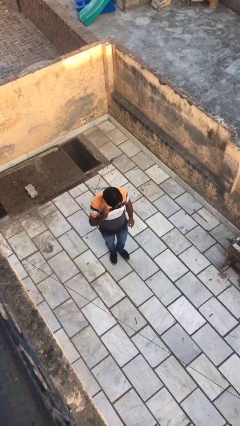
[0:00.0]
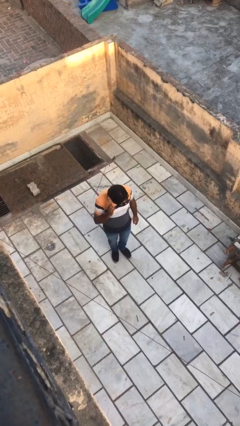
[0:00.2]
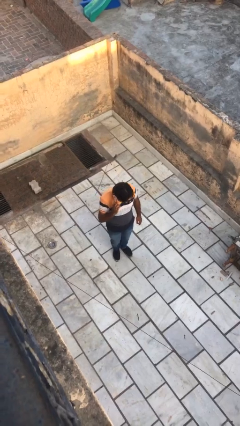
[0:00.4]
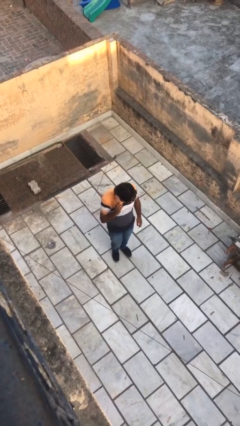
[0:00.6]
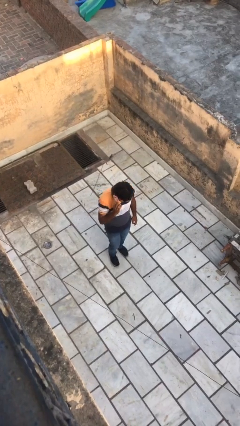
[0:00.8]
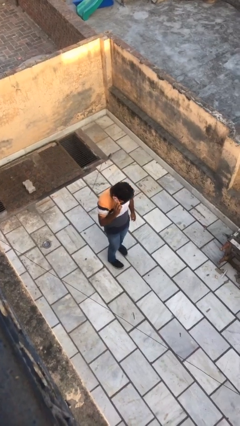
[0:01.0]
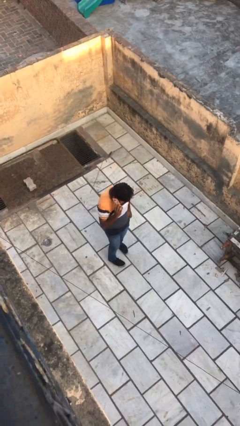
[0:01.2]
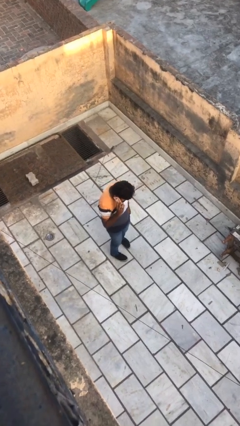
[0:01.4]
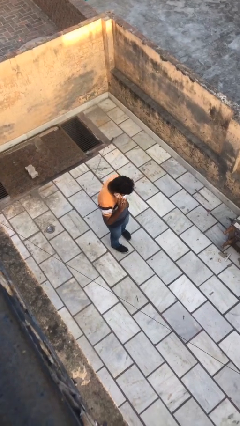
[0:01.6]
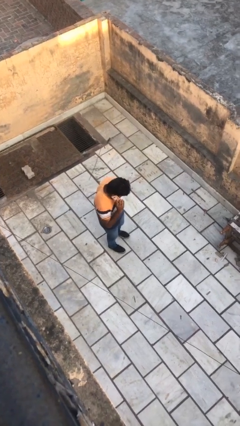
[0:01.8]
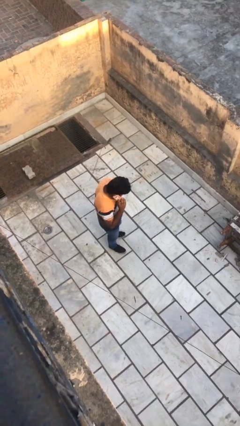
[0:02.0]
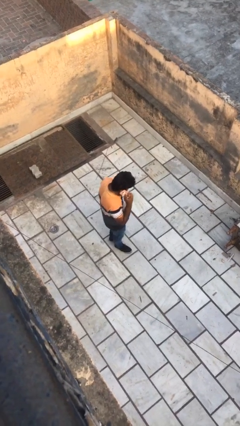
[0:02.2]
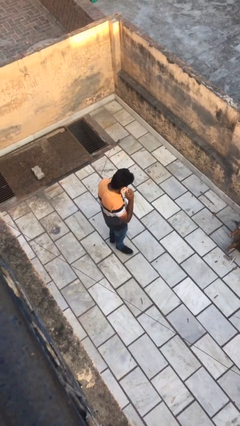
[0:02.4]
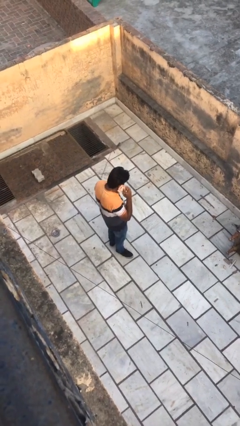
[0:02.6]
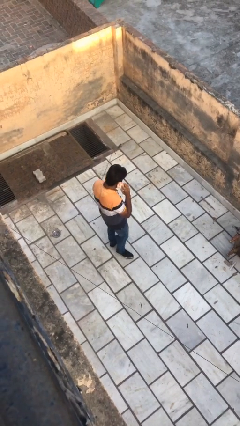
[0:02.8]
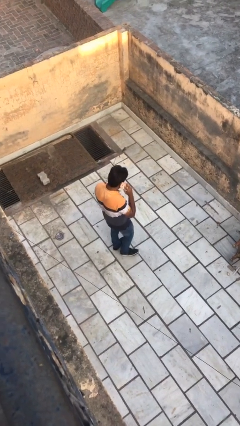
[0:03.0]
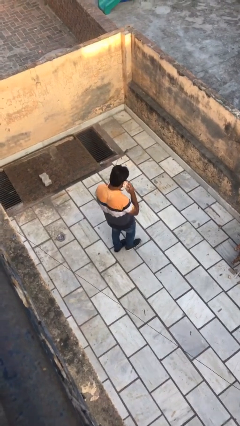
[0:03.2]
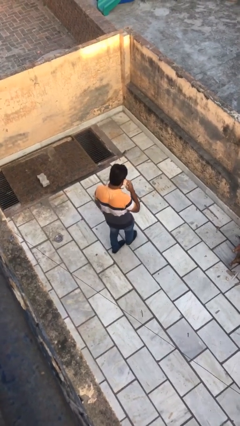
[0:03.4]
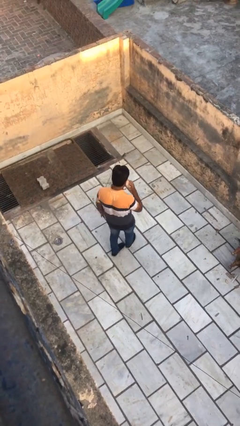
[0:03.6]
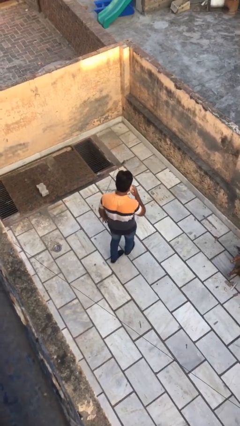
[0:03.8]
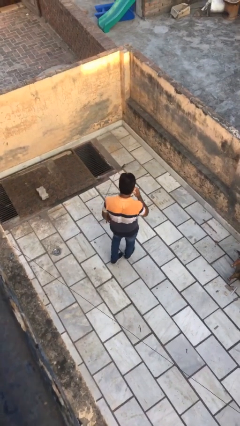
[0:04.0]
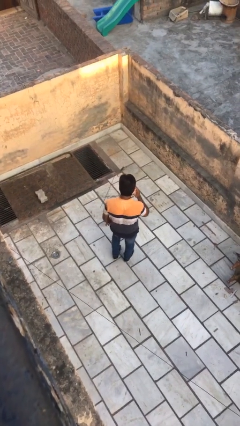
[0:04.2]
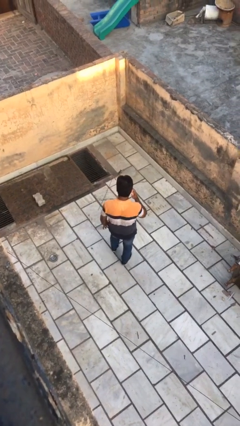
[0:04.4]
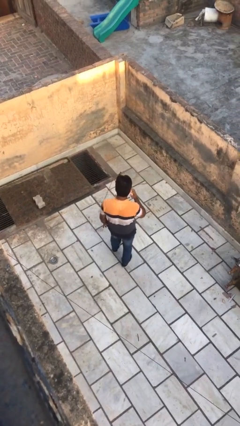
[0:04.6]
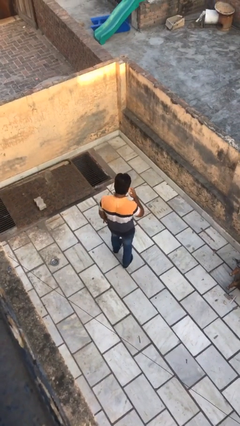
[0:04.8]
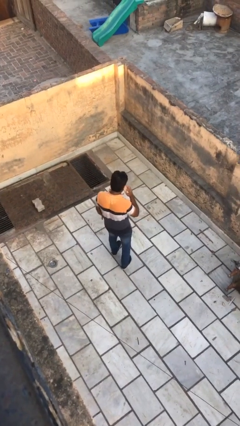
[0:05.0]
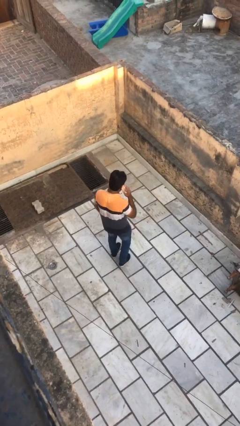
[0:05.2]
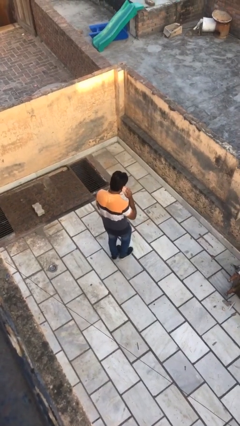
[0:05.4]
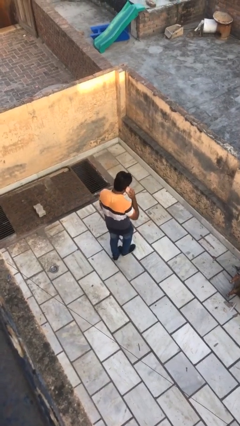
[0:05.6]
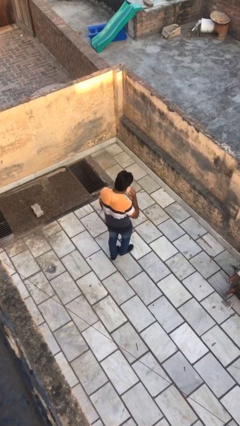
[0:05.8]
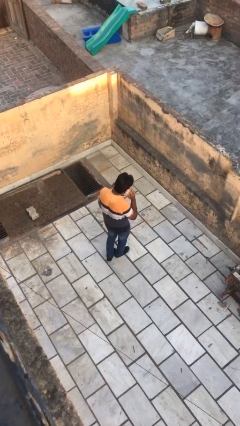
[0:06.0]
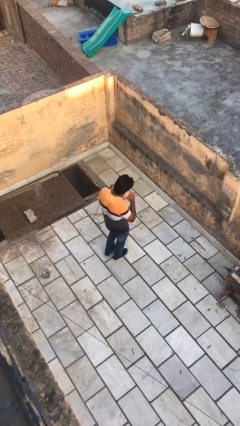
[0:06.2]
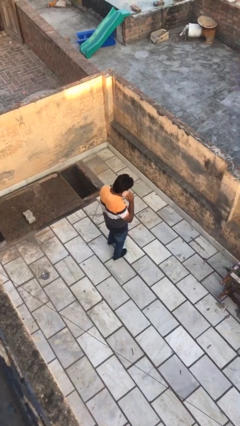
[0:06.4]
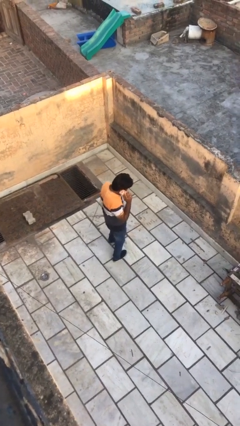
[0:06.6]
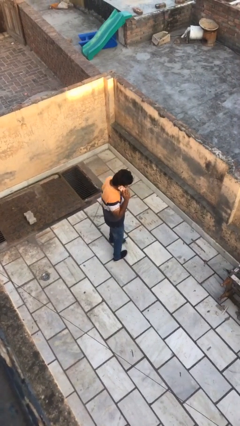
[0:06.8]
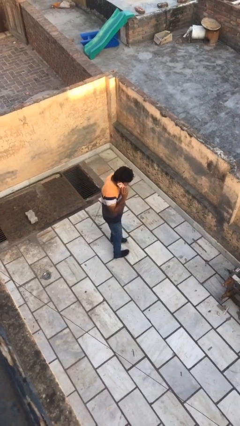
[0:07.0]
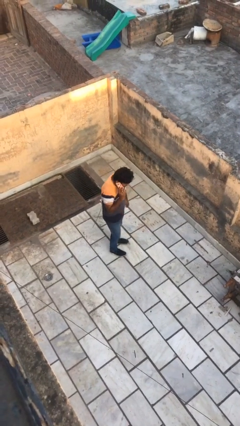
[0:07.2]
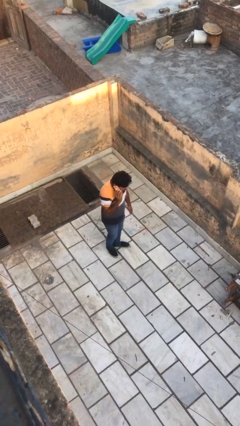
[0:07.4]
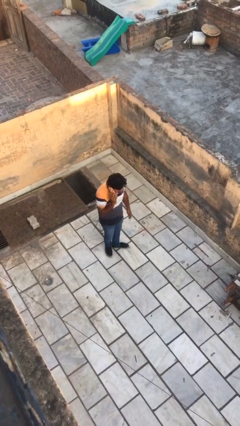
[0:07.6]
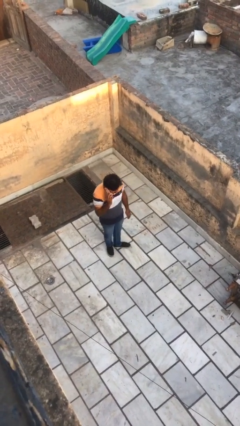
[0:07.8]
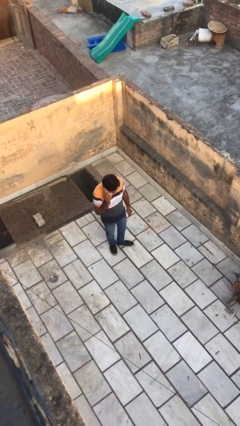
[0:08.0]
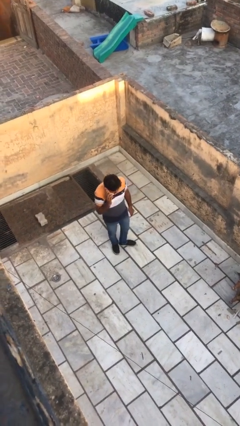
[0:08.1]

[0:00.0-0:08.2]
person talks on phone

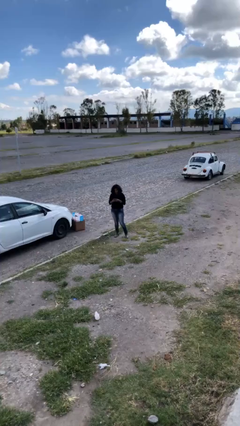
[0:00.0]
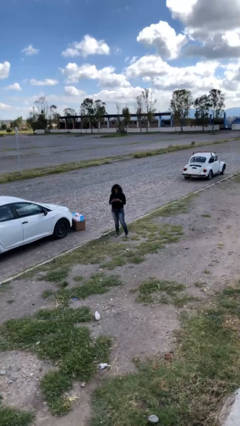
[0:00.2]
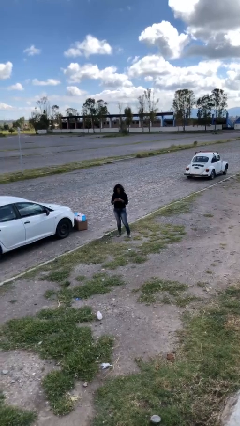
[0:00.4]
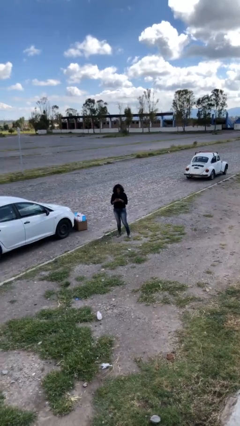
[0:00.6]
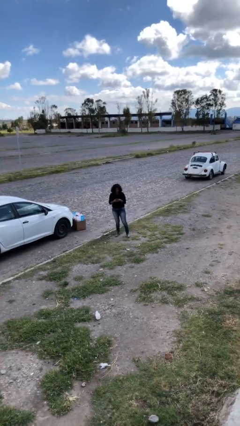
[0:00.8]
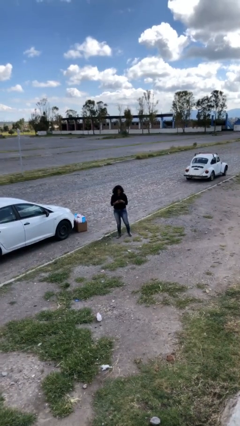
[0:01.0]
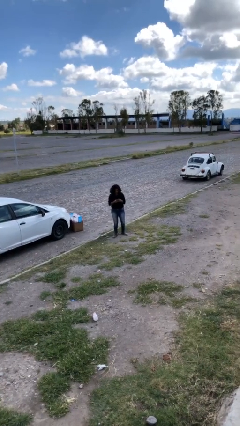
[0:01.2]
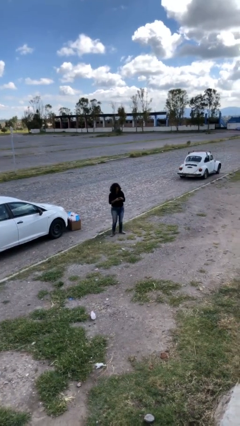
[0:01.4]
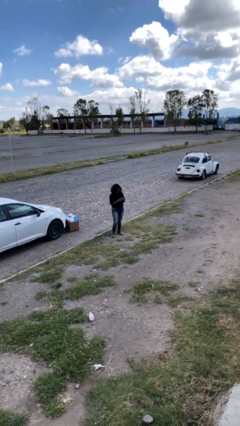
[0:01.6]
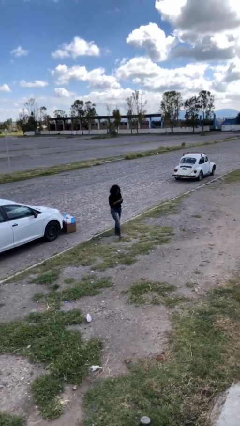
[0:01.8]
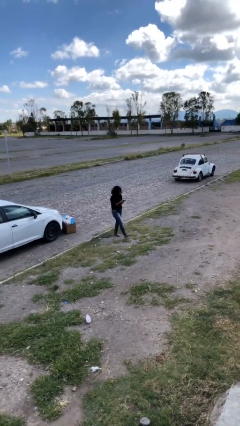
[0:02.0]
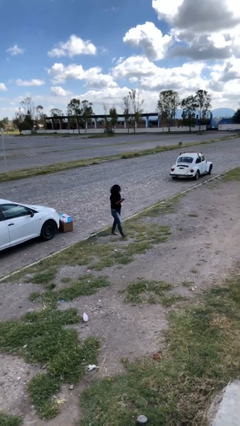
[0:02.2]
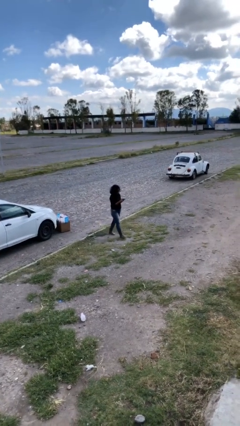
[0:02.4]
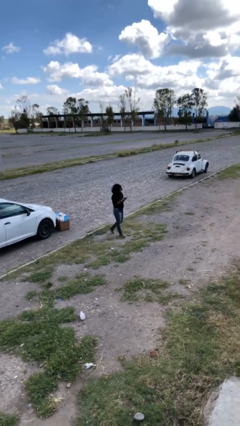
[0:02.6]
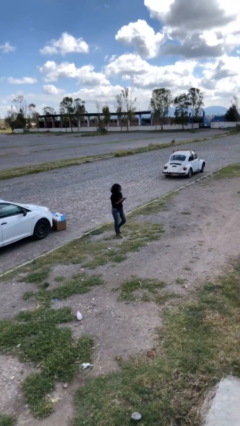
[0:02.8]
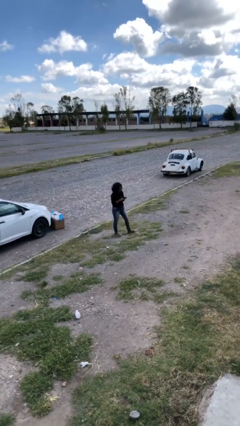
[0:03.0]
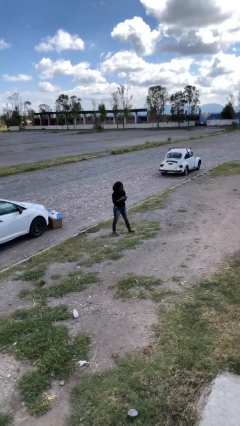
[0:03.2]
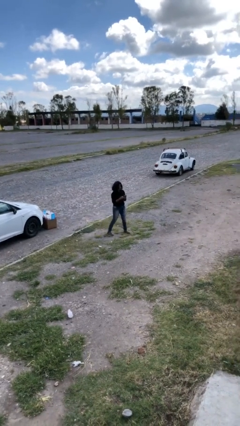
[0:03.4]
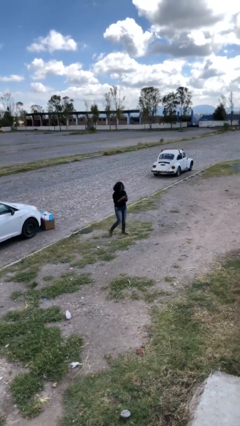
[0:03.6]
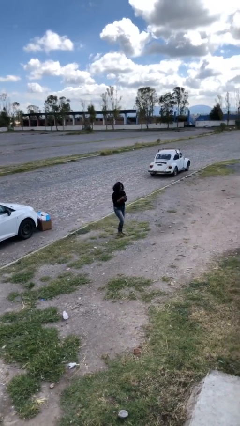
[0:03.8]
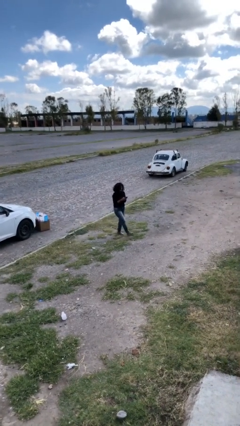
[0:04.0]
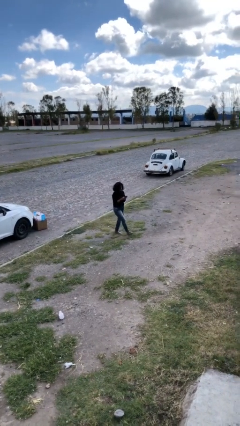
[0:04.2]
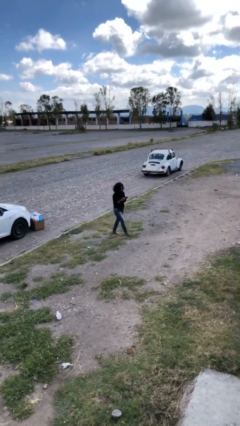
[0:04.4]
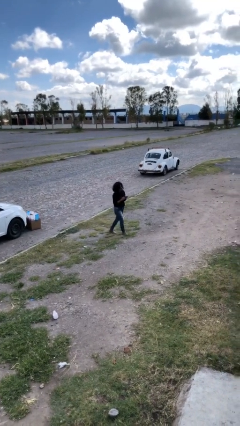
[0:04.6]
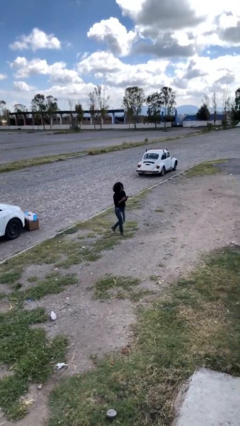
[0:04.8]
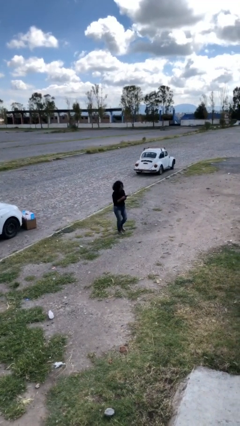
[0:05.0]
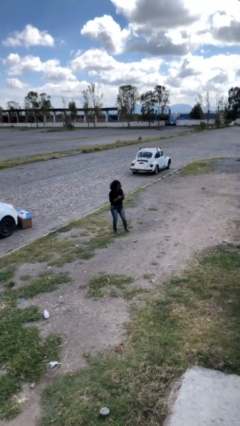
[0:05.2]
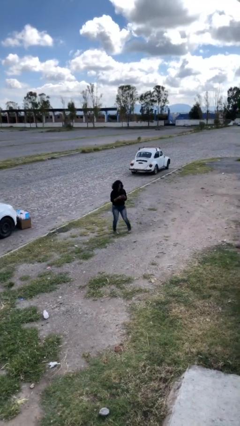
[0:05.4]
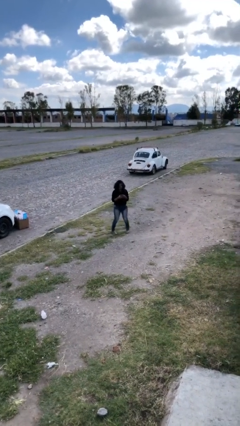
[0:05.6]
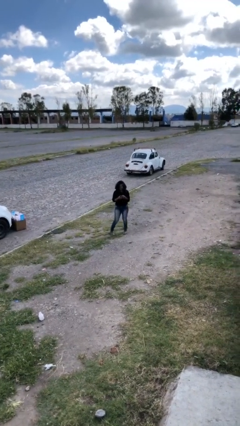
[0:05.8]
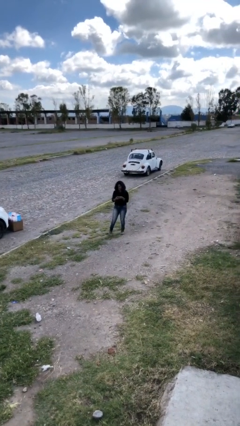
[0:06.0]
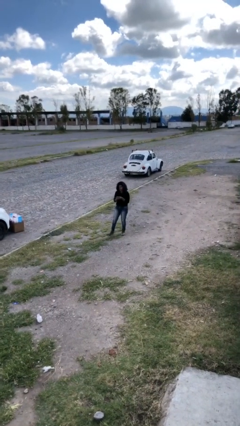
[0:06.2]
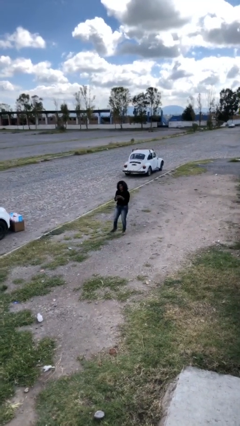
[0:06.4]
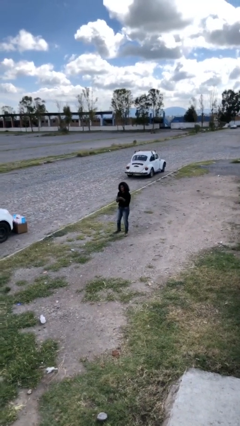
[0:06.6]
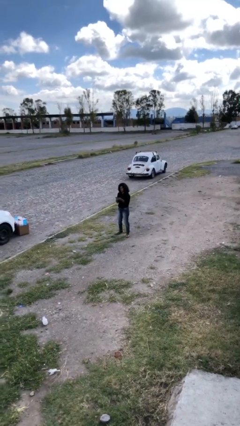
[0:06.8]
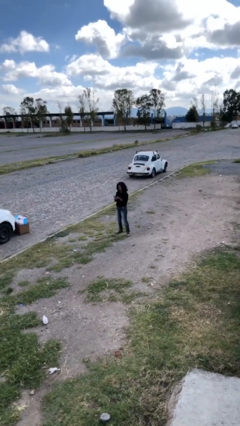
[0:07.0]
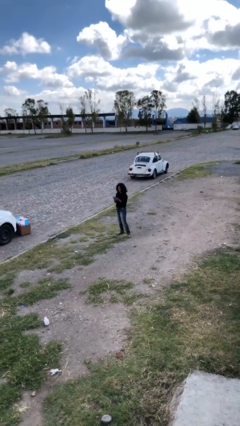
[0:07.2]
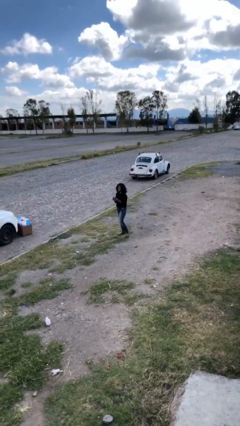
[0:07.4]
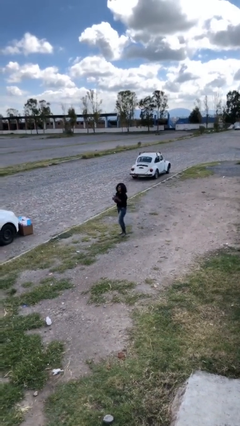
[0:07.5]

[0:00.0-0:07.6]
person texts on phone

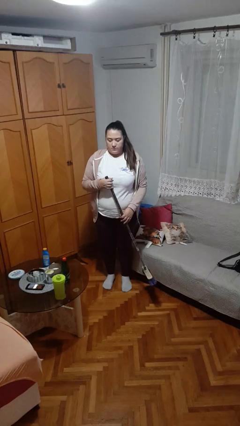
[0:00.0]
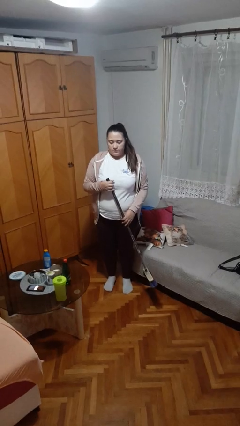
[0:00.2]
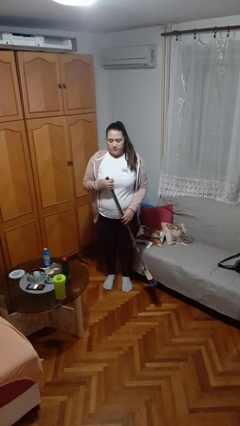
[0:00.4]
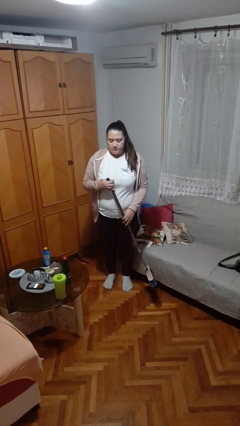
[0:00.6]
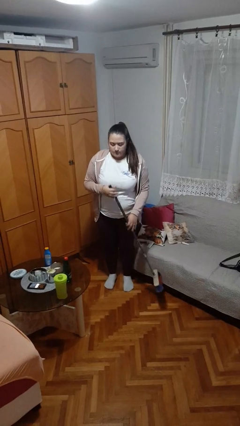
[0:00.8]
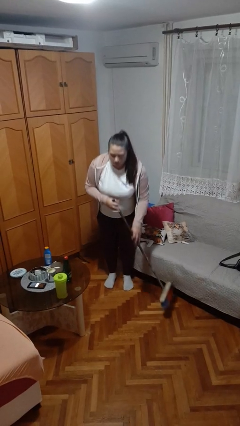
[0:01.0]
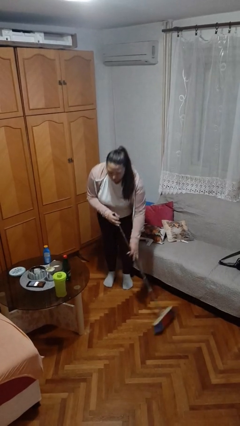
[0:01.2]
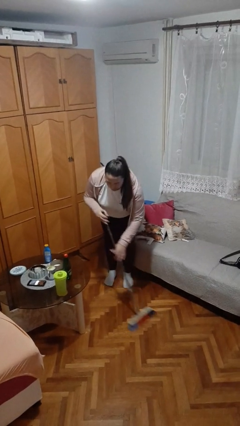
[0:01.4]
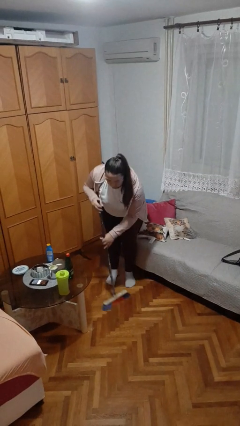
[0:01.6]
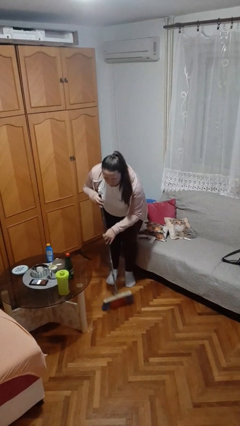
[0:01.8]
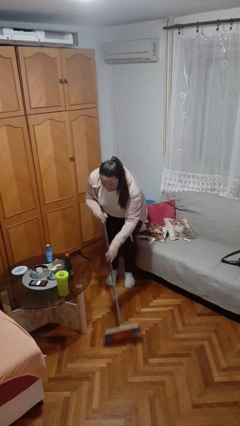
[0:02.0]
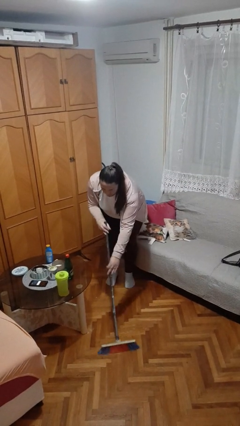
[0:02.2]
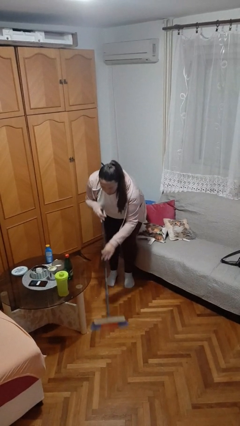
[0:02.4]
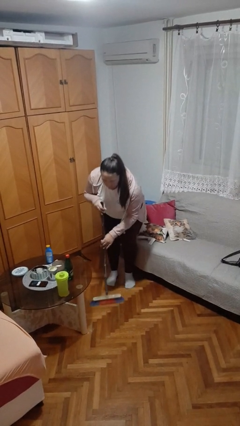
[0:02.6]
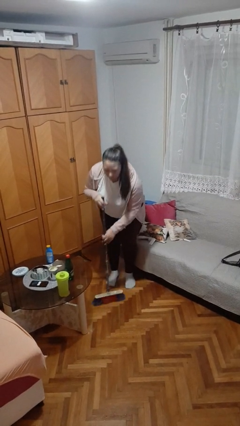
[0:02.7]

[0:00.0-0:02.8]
person sweeps floor
